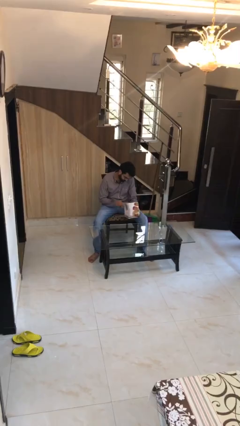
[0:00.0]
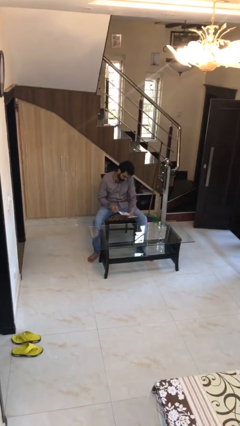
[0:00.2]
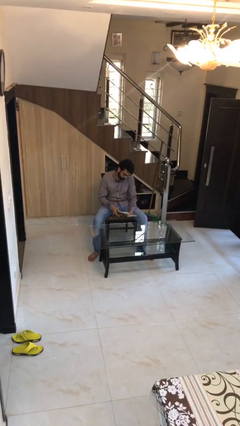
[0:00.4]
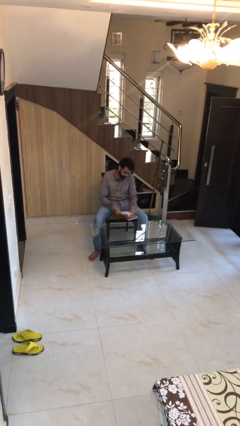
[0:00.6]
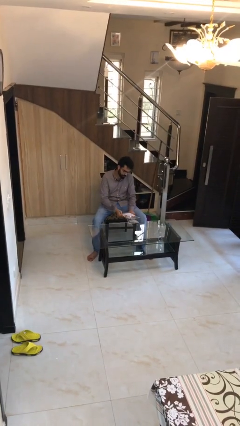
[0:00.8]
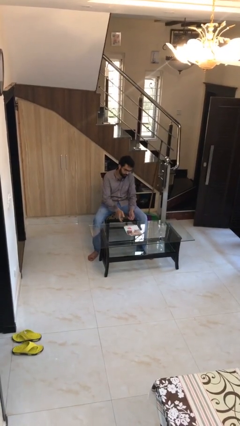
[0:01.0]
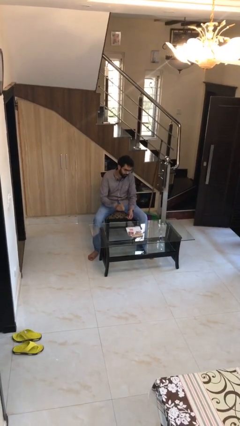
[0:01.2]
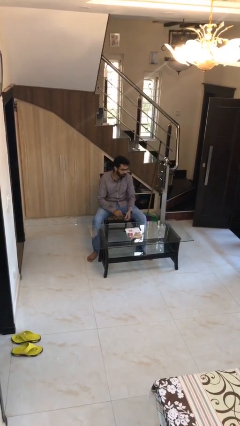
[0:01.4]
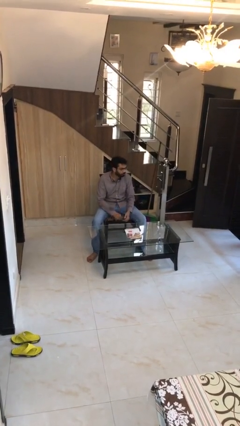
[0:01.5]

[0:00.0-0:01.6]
person puts down object on table

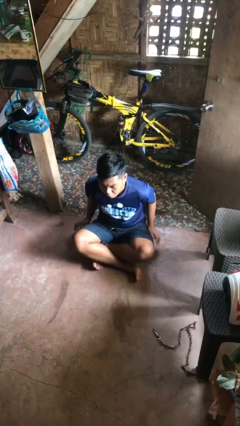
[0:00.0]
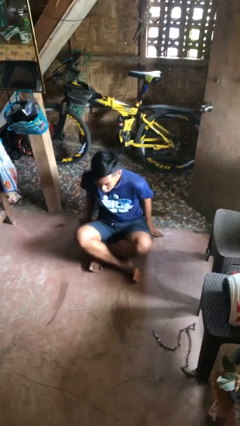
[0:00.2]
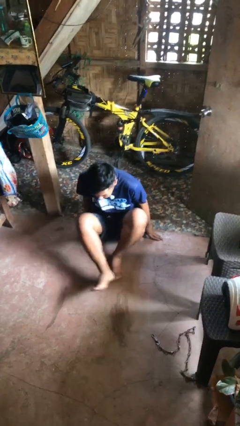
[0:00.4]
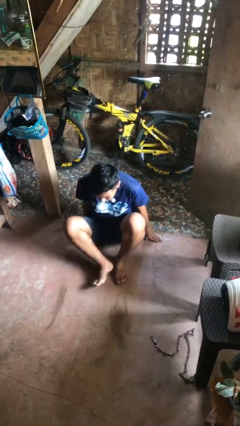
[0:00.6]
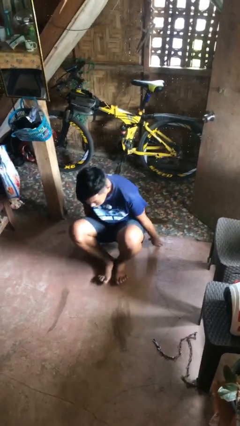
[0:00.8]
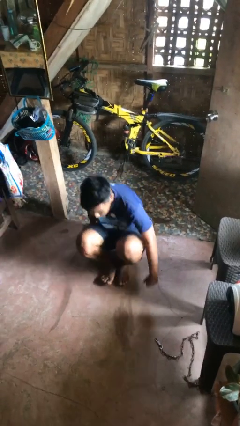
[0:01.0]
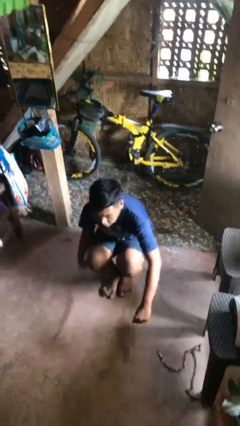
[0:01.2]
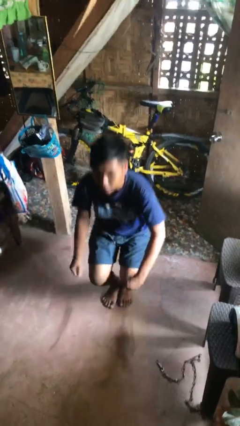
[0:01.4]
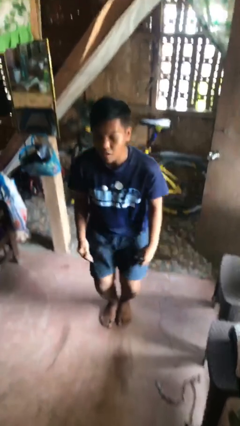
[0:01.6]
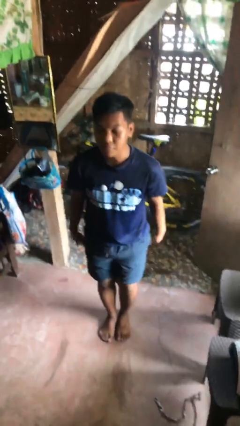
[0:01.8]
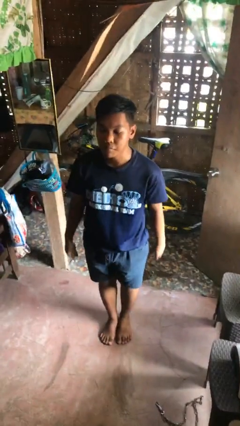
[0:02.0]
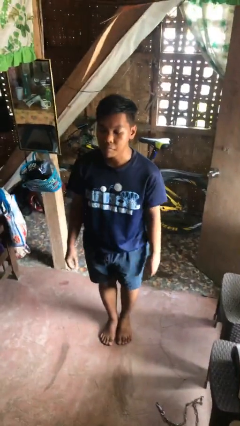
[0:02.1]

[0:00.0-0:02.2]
person stands up from floor

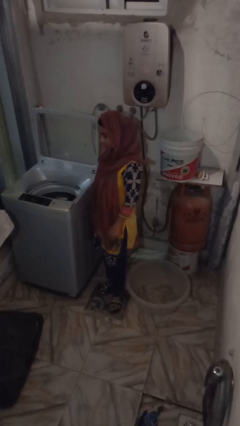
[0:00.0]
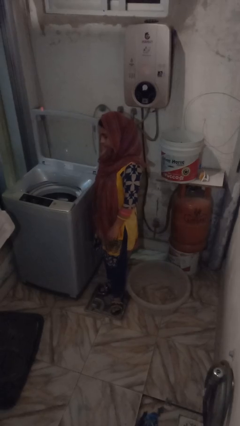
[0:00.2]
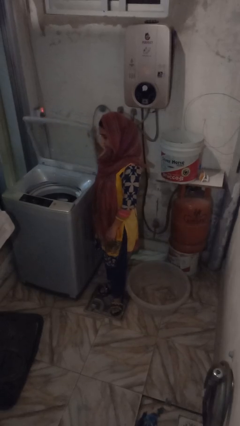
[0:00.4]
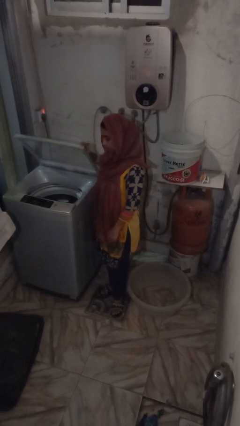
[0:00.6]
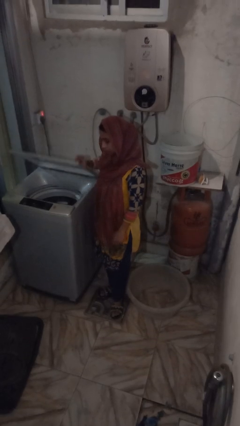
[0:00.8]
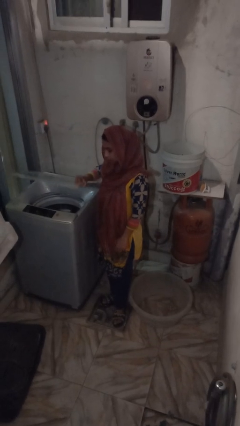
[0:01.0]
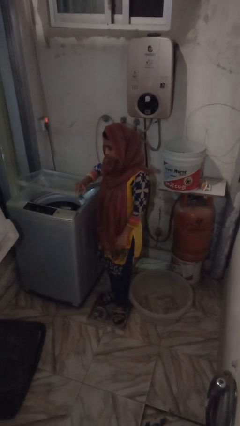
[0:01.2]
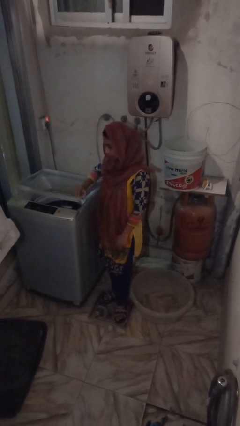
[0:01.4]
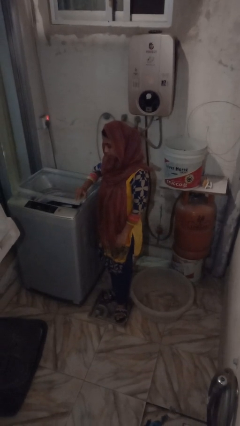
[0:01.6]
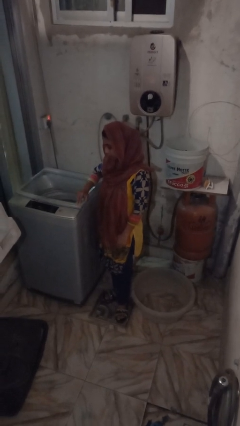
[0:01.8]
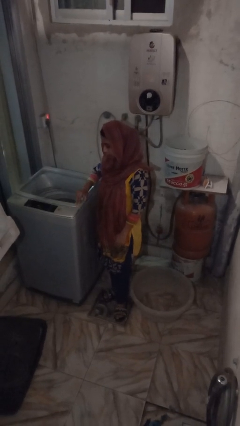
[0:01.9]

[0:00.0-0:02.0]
person closes clothes washer

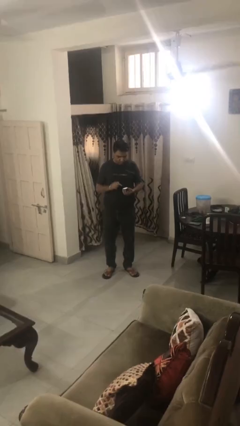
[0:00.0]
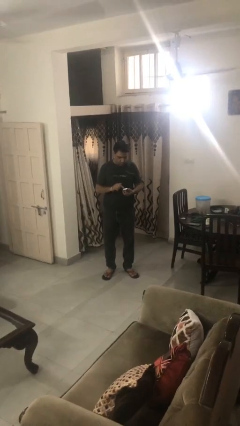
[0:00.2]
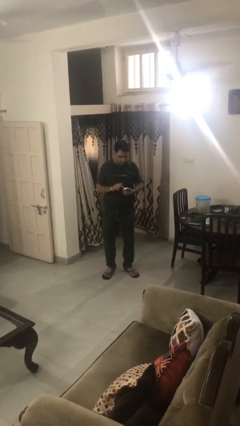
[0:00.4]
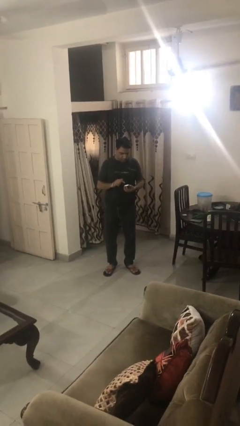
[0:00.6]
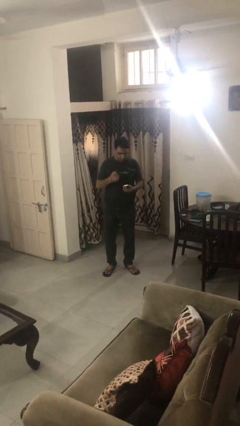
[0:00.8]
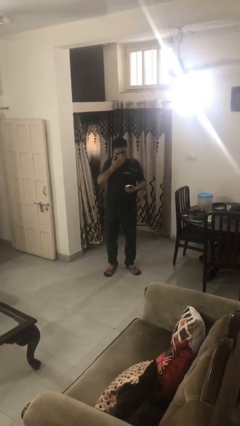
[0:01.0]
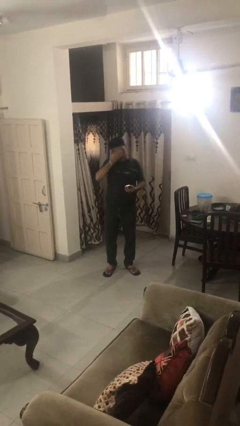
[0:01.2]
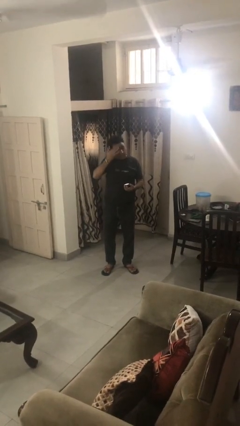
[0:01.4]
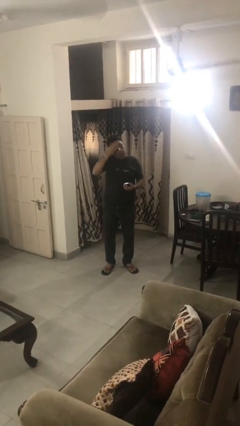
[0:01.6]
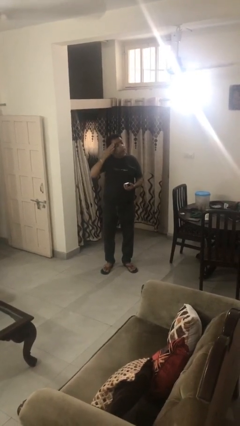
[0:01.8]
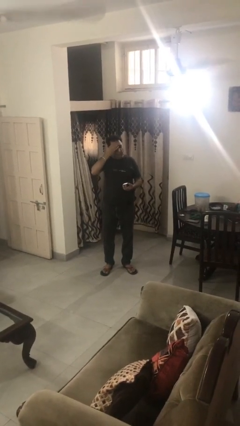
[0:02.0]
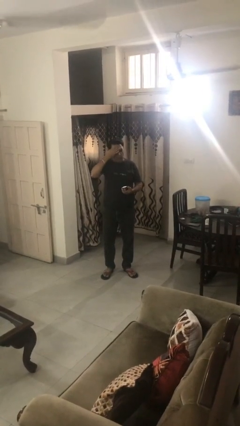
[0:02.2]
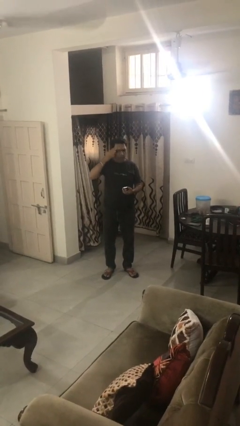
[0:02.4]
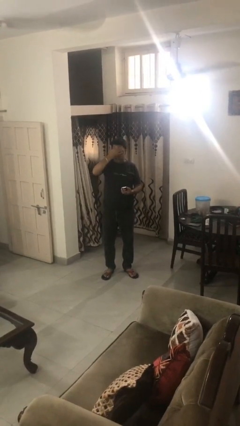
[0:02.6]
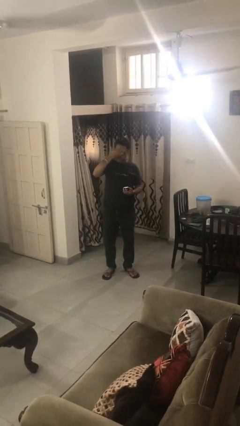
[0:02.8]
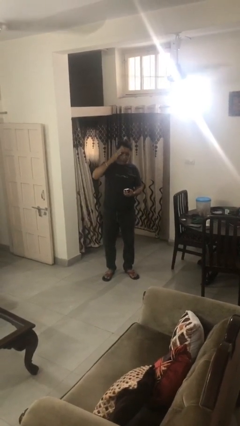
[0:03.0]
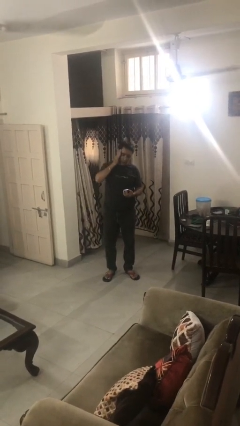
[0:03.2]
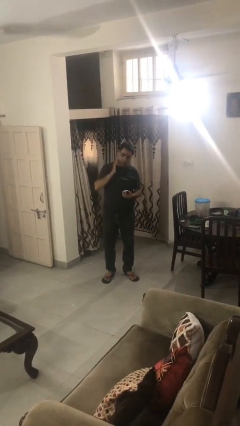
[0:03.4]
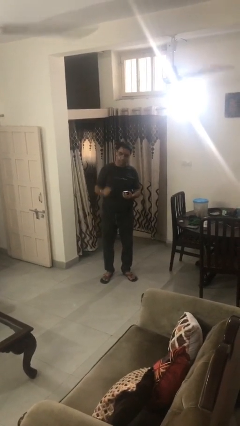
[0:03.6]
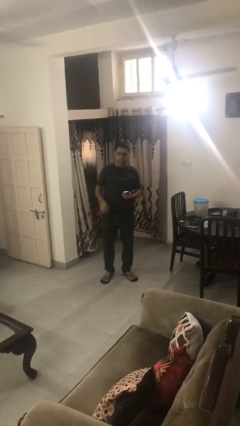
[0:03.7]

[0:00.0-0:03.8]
person applies facial moisturizer

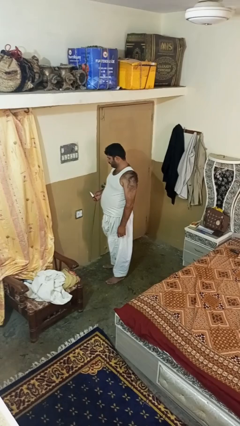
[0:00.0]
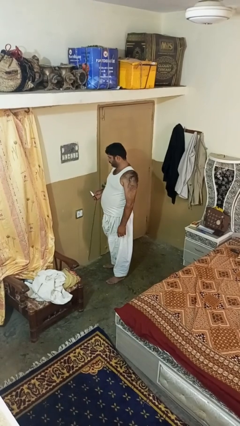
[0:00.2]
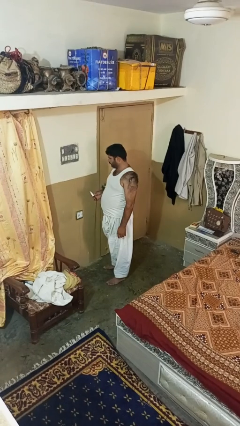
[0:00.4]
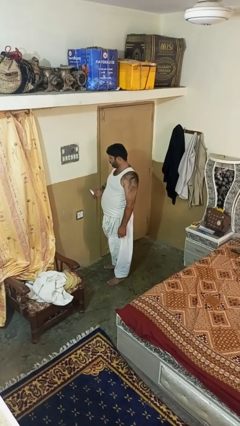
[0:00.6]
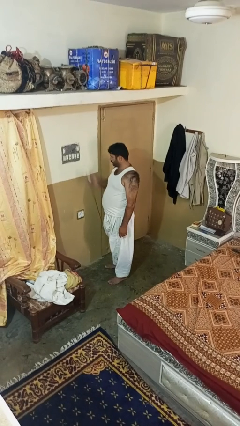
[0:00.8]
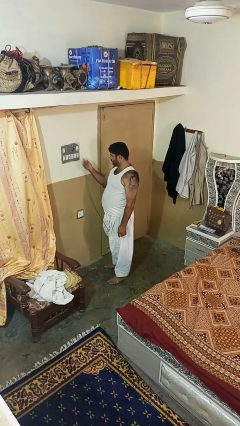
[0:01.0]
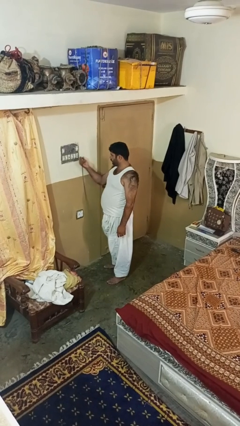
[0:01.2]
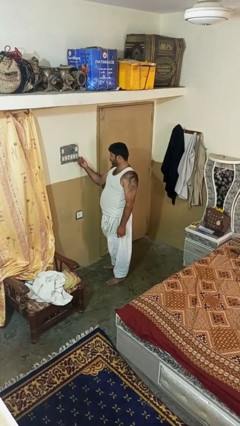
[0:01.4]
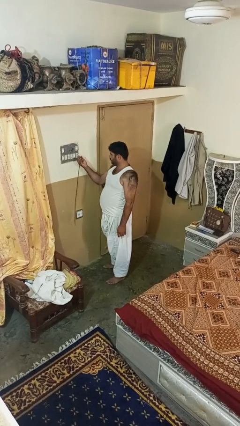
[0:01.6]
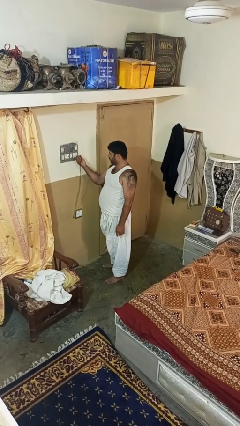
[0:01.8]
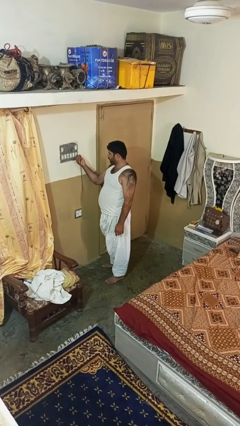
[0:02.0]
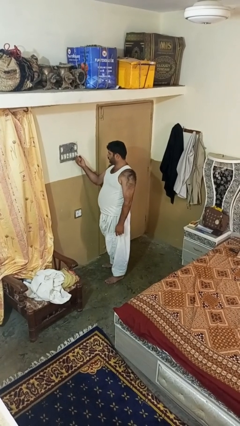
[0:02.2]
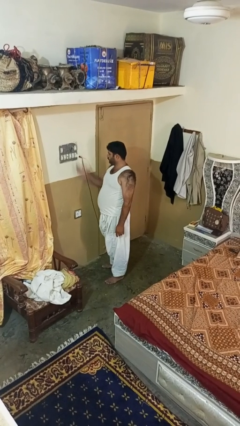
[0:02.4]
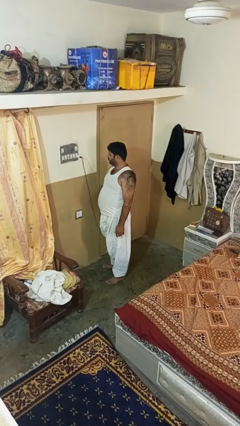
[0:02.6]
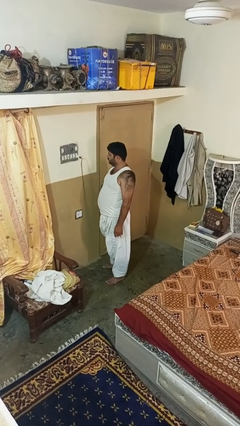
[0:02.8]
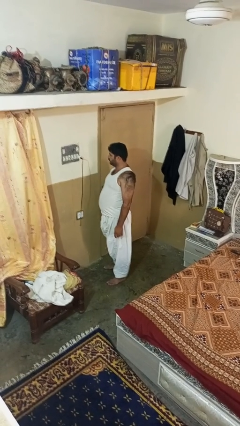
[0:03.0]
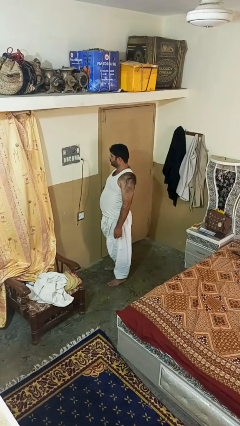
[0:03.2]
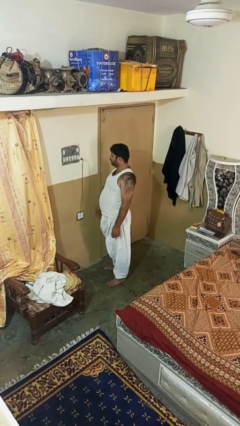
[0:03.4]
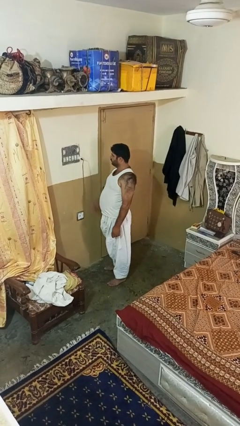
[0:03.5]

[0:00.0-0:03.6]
person plugs into electrical socket

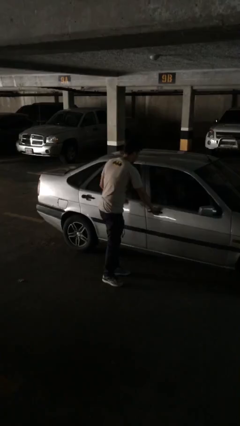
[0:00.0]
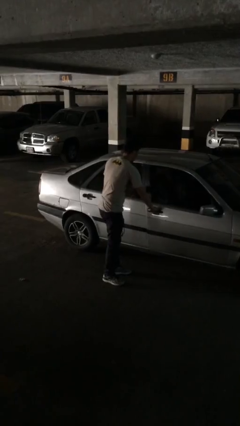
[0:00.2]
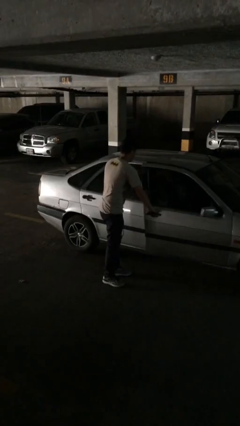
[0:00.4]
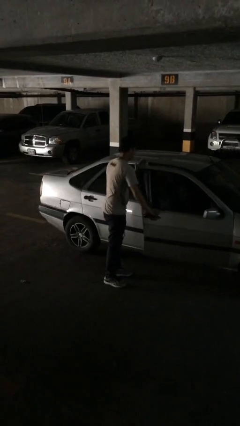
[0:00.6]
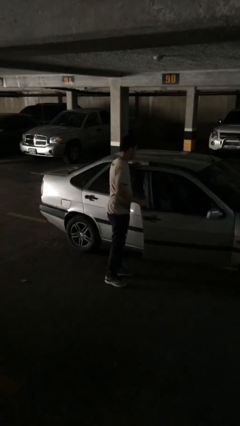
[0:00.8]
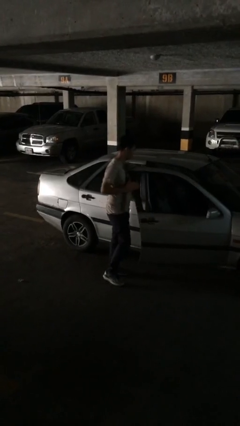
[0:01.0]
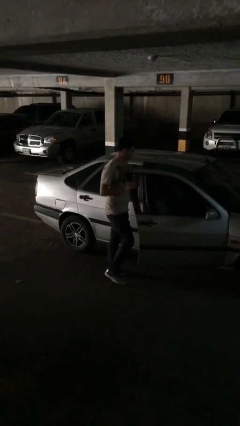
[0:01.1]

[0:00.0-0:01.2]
person opens car door

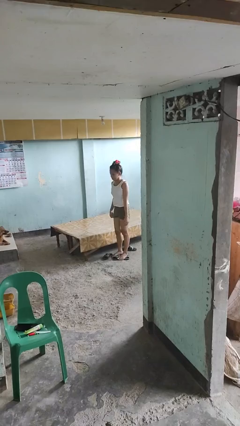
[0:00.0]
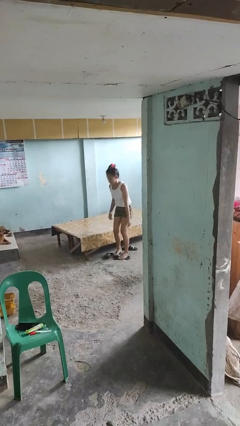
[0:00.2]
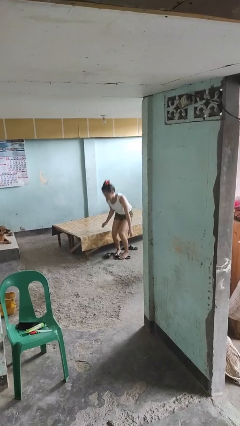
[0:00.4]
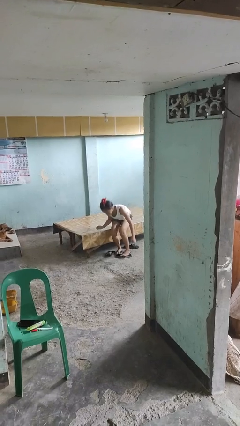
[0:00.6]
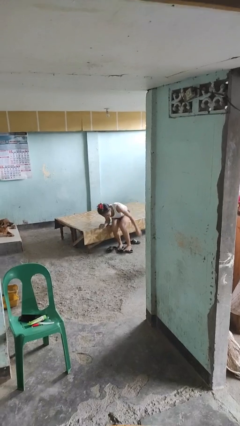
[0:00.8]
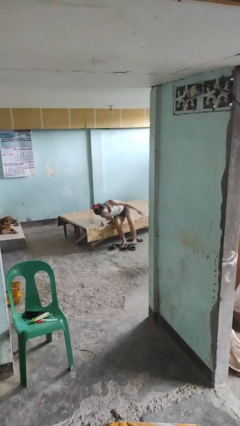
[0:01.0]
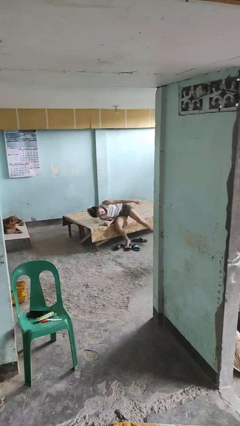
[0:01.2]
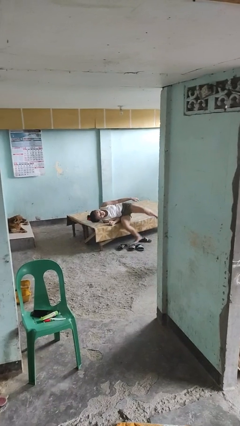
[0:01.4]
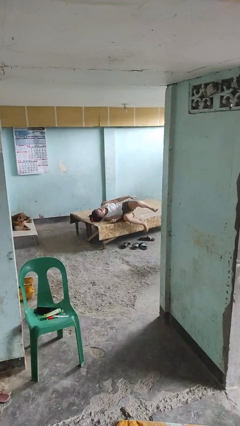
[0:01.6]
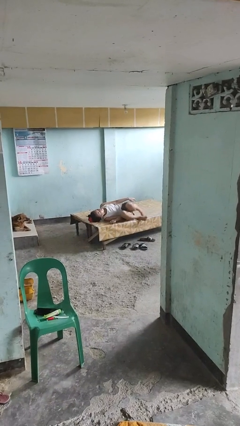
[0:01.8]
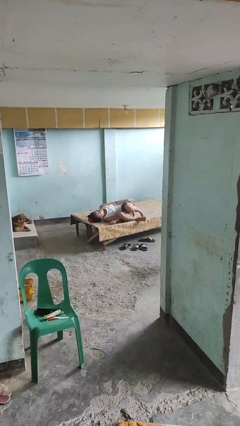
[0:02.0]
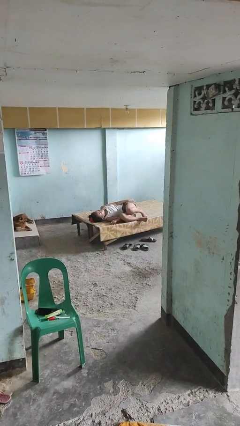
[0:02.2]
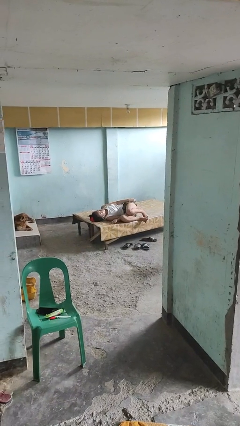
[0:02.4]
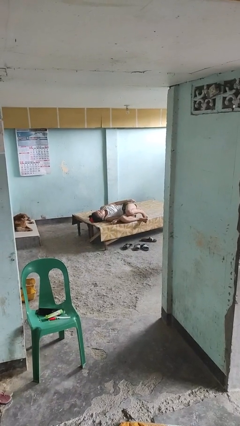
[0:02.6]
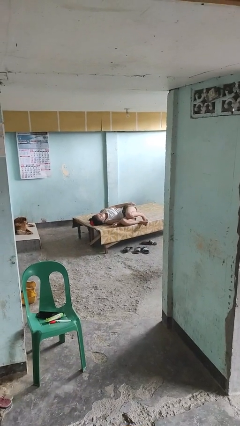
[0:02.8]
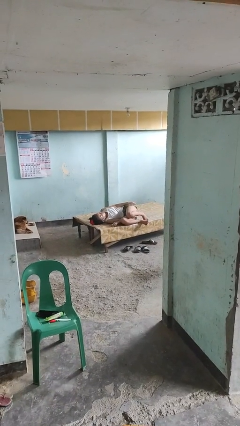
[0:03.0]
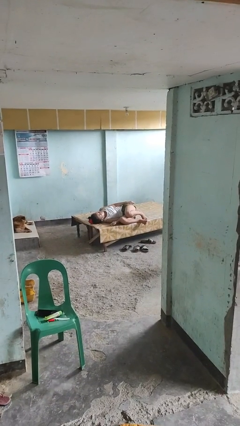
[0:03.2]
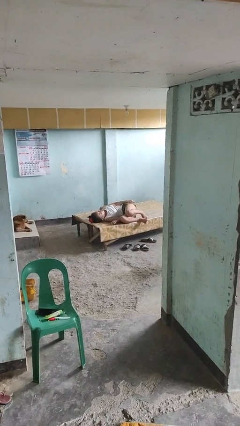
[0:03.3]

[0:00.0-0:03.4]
person lies down on bed
